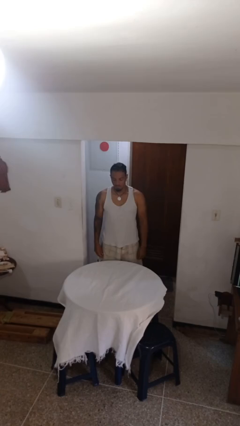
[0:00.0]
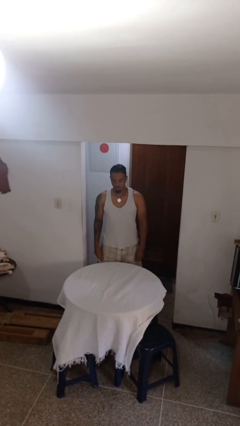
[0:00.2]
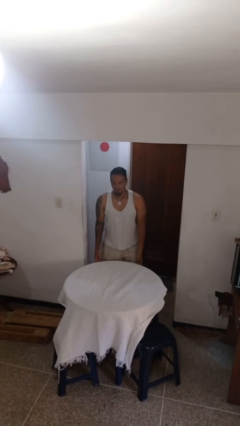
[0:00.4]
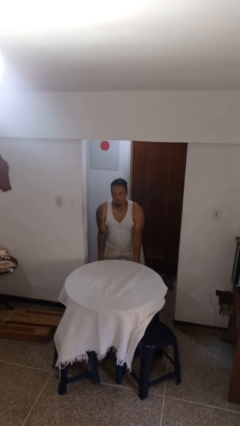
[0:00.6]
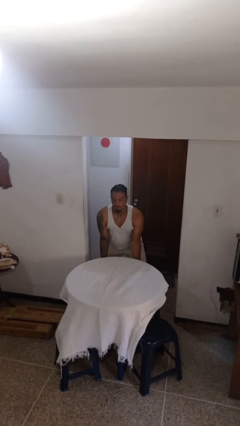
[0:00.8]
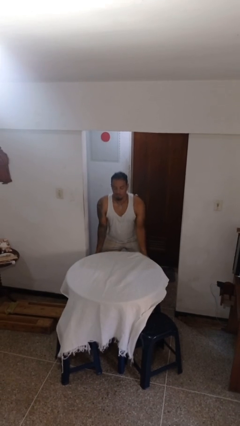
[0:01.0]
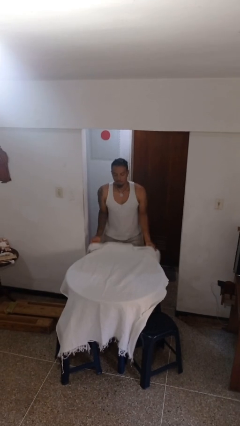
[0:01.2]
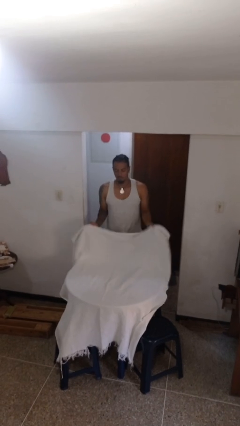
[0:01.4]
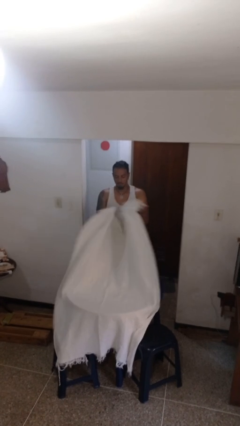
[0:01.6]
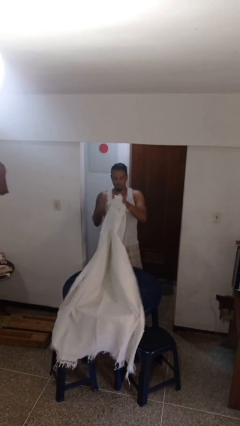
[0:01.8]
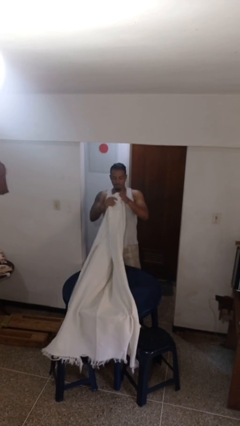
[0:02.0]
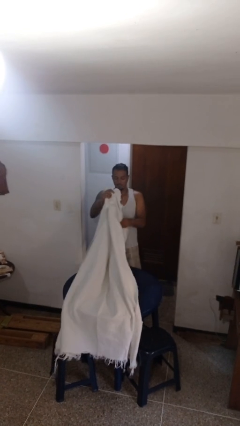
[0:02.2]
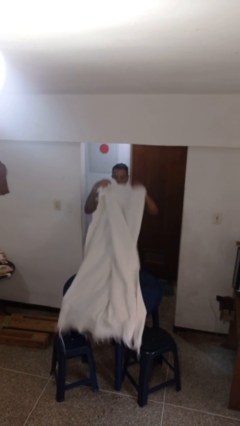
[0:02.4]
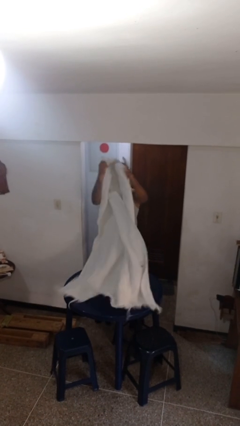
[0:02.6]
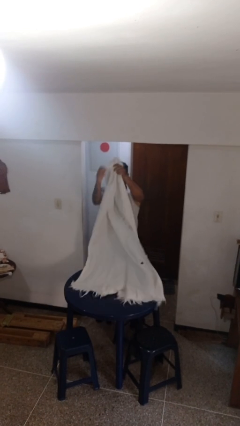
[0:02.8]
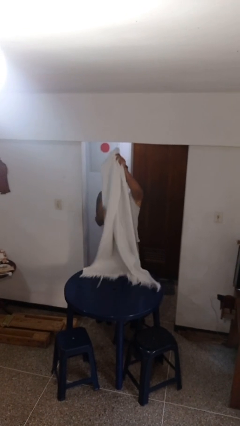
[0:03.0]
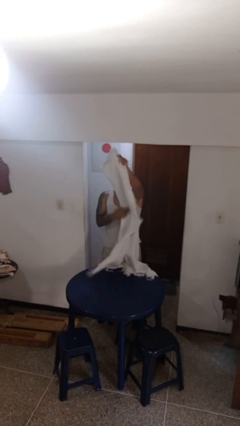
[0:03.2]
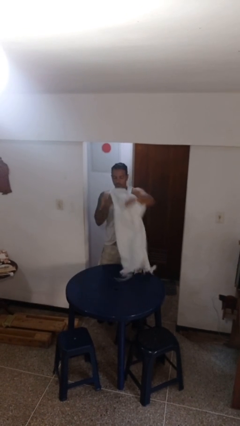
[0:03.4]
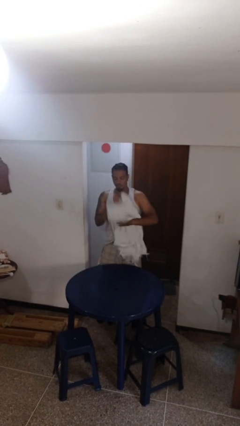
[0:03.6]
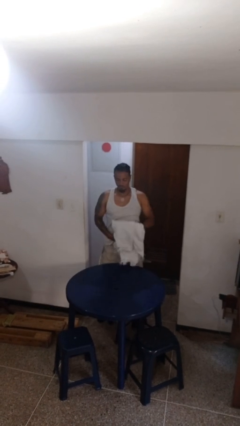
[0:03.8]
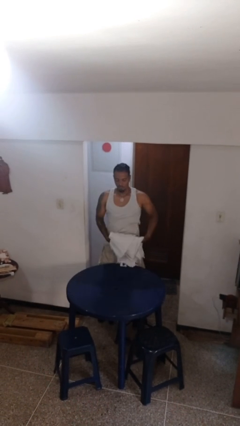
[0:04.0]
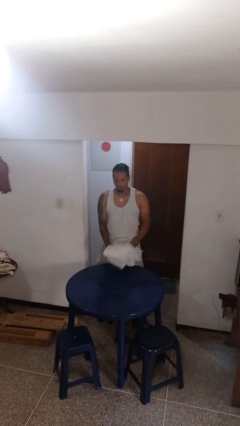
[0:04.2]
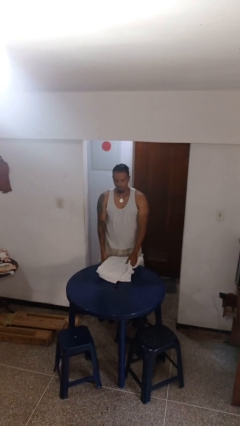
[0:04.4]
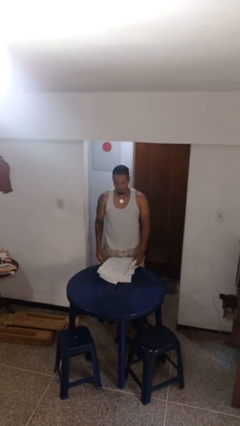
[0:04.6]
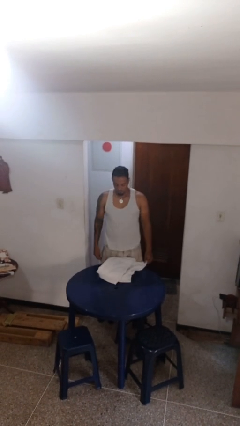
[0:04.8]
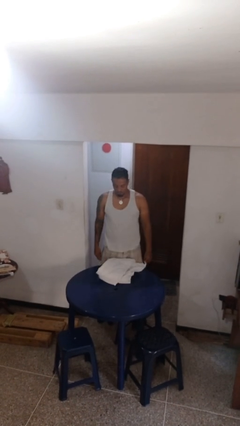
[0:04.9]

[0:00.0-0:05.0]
person folds tablecloth

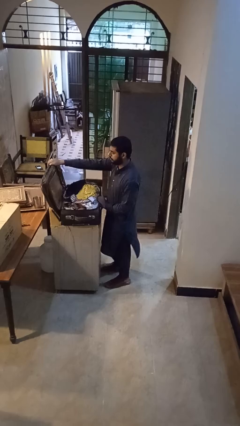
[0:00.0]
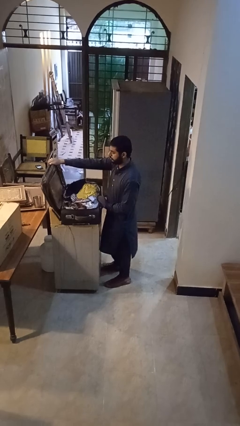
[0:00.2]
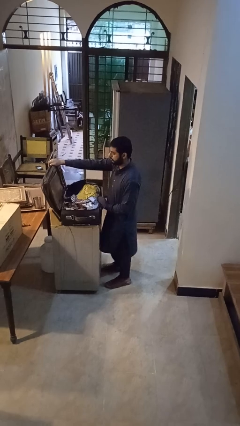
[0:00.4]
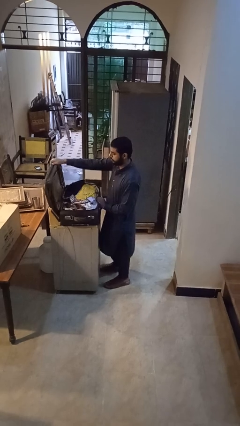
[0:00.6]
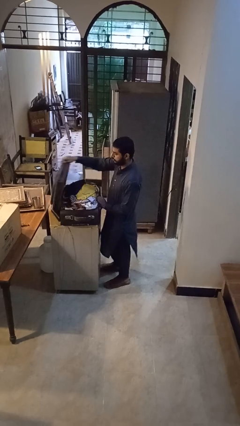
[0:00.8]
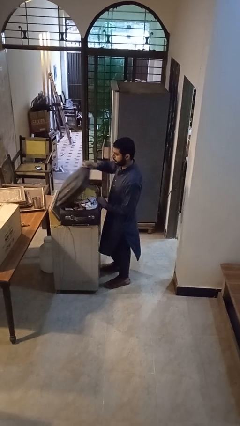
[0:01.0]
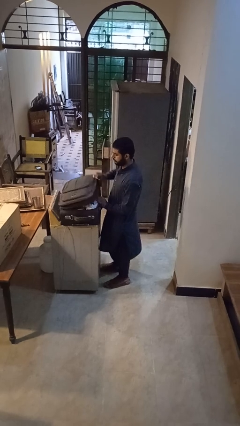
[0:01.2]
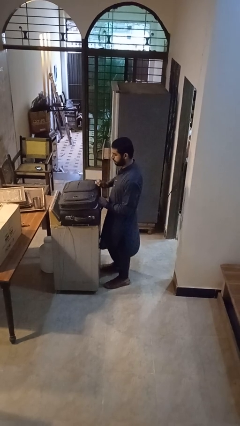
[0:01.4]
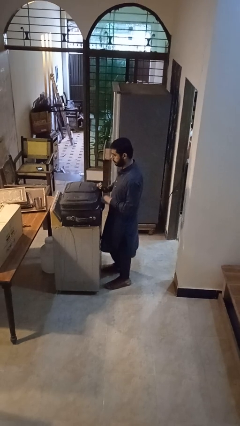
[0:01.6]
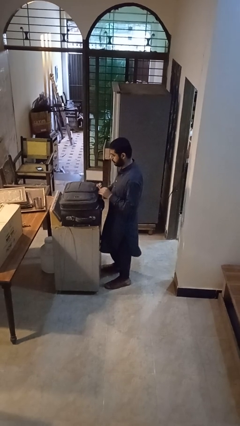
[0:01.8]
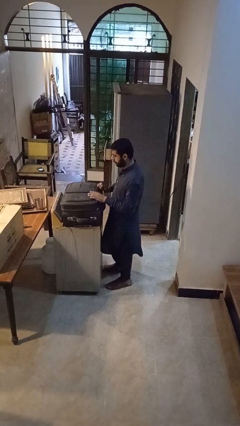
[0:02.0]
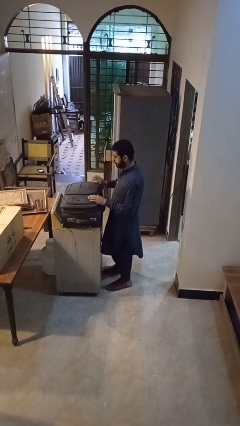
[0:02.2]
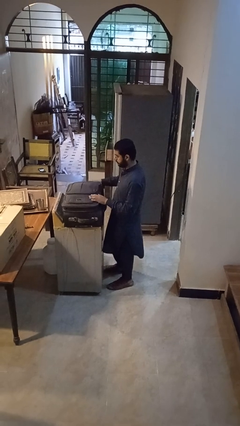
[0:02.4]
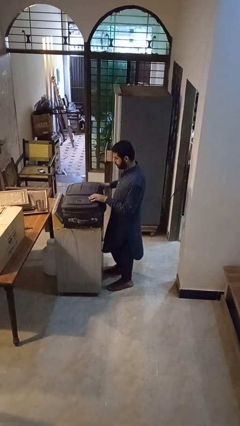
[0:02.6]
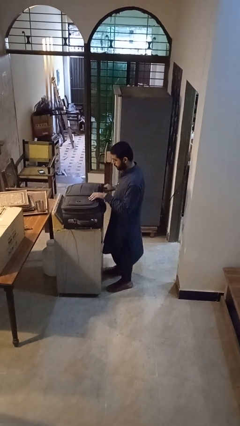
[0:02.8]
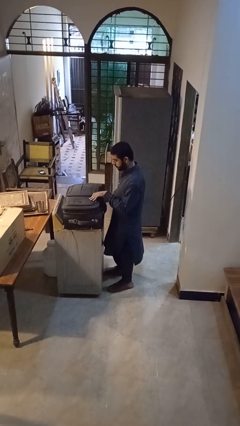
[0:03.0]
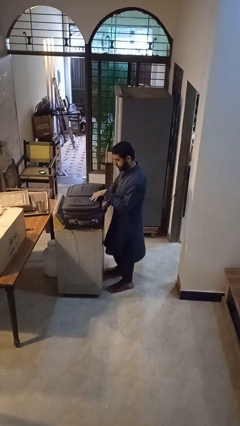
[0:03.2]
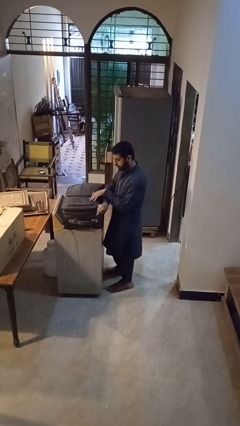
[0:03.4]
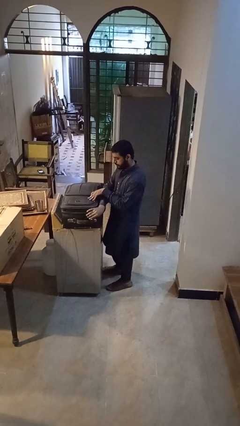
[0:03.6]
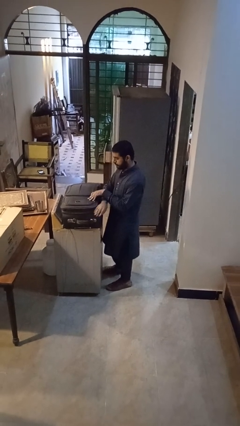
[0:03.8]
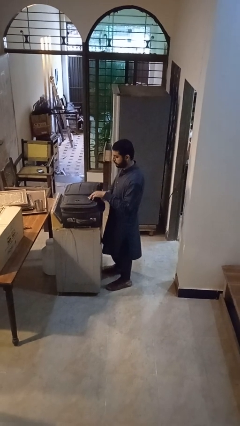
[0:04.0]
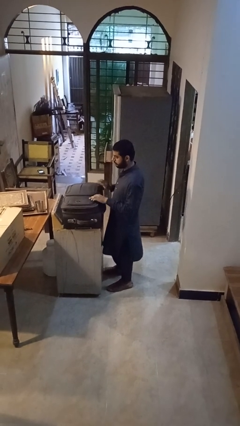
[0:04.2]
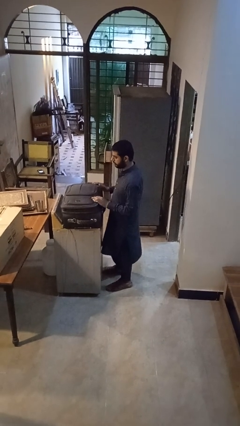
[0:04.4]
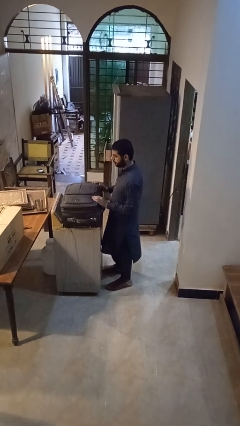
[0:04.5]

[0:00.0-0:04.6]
person closes suitcase

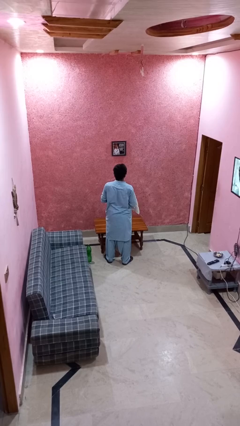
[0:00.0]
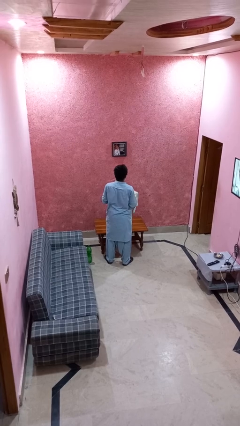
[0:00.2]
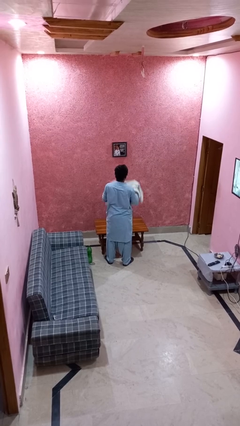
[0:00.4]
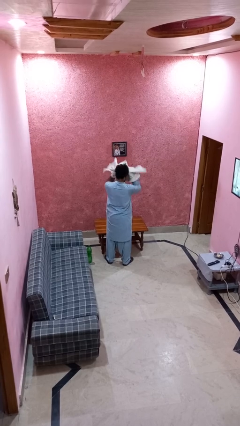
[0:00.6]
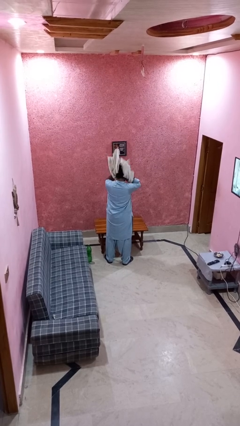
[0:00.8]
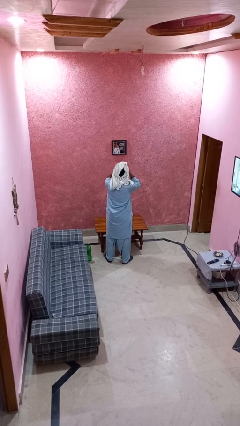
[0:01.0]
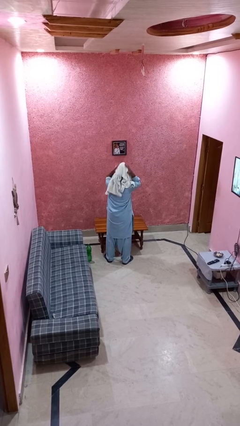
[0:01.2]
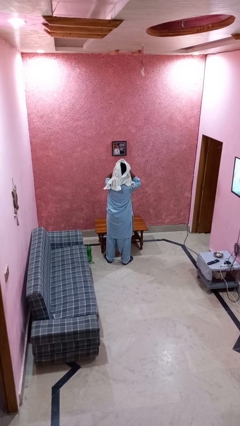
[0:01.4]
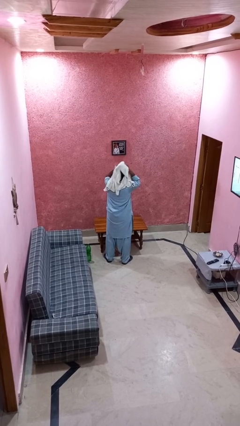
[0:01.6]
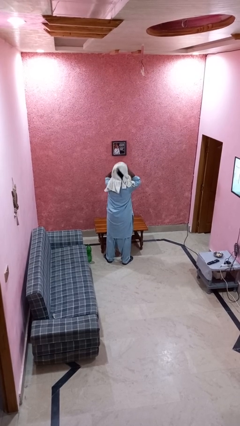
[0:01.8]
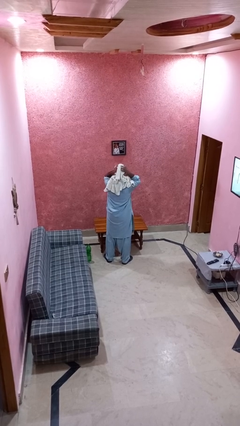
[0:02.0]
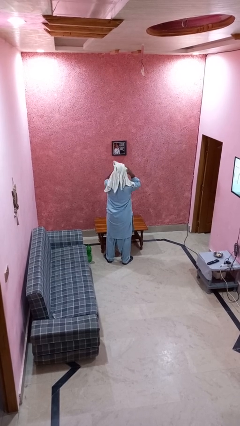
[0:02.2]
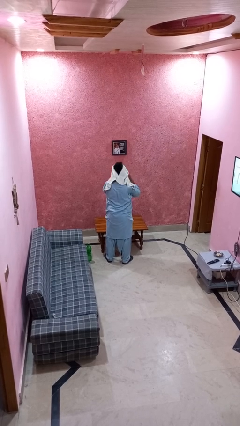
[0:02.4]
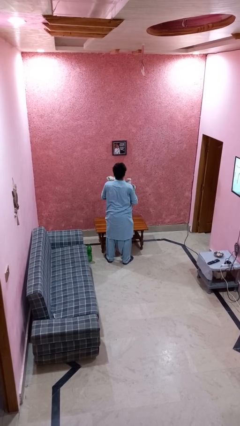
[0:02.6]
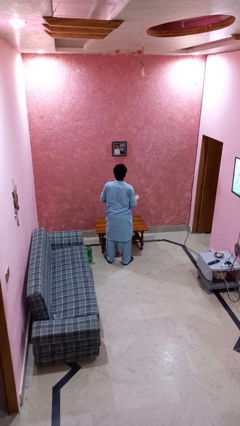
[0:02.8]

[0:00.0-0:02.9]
person dries hair with towel

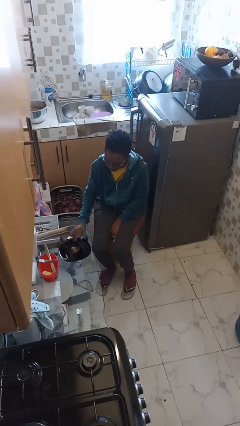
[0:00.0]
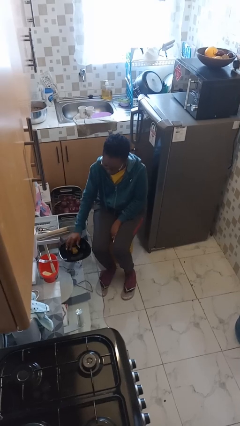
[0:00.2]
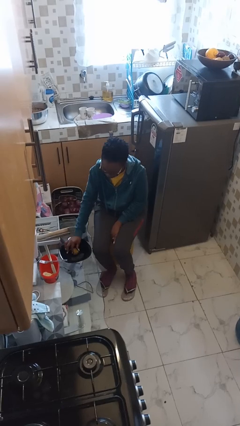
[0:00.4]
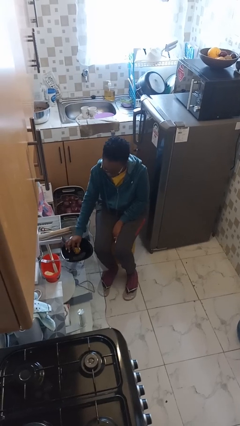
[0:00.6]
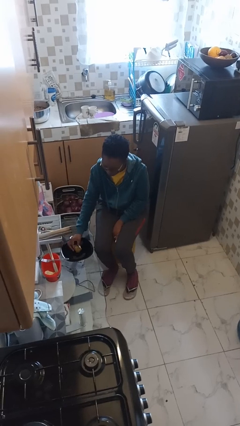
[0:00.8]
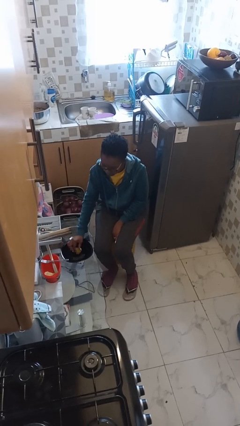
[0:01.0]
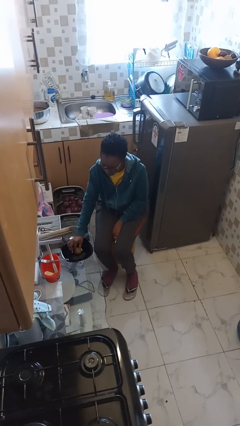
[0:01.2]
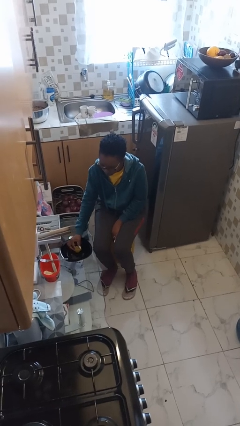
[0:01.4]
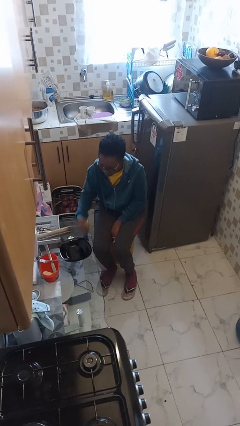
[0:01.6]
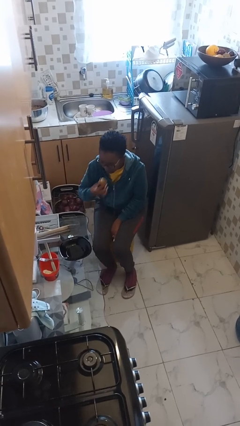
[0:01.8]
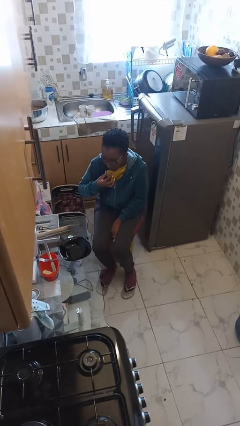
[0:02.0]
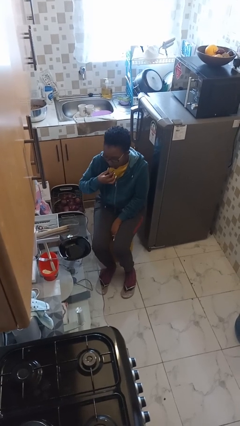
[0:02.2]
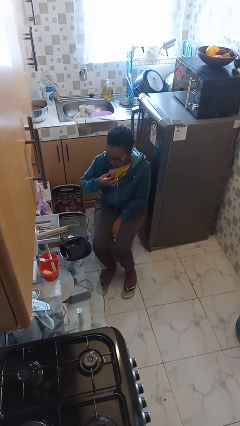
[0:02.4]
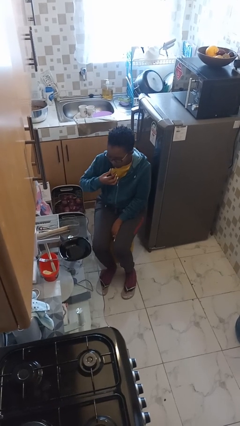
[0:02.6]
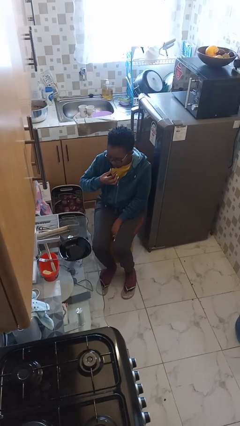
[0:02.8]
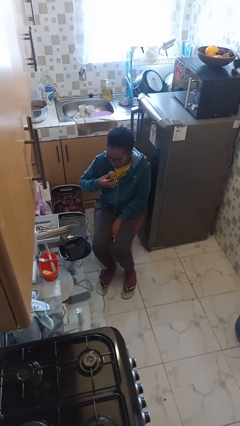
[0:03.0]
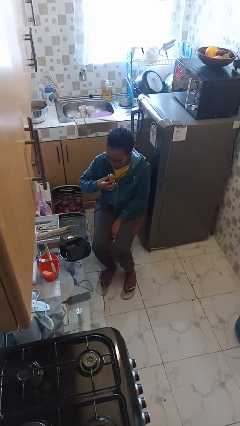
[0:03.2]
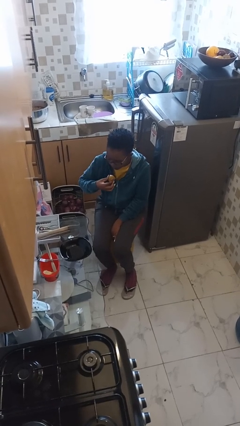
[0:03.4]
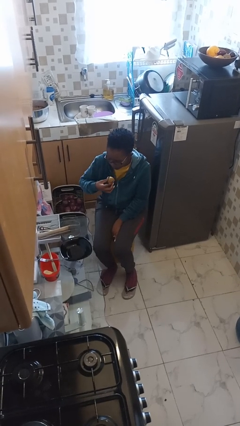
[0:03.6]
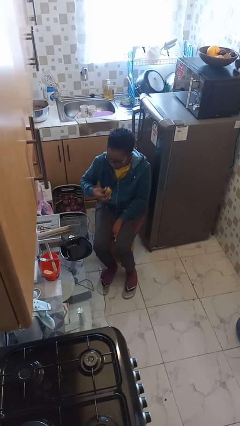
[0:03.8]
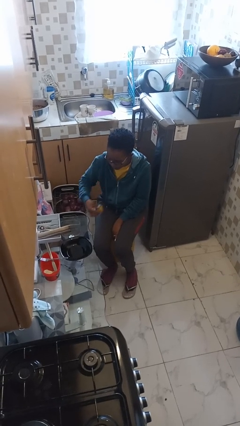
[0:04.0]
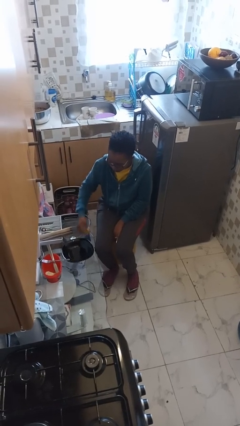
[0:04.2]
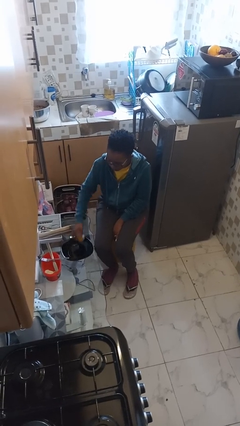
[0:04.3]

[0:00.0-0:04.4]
person eats with hands

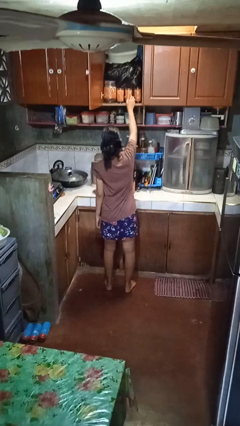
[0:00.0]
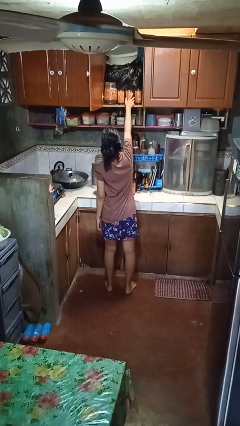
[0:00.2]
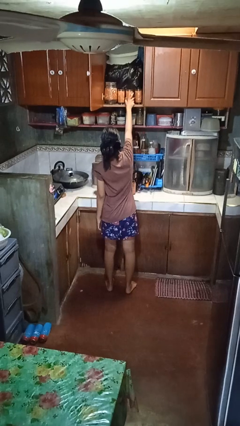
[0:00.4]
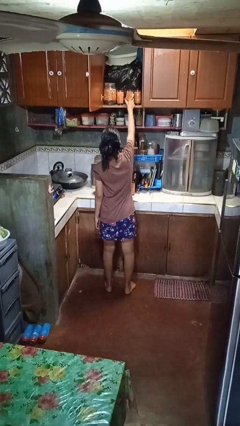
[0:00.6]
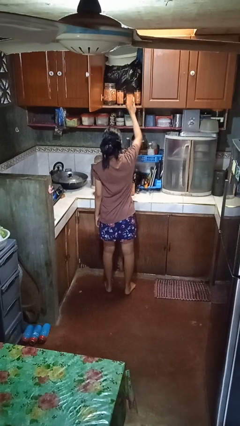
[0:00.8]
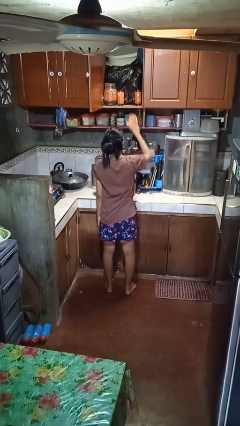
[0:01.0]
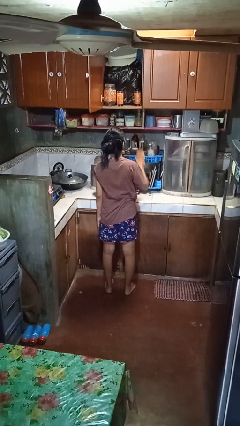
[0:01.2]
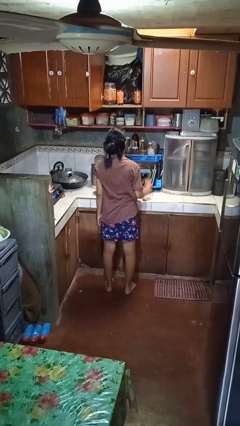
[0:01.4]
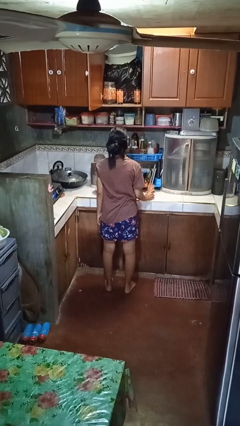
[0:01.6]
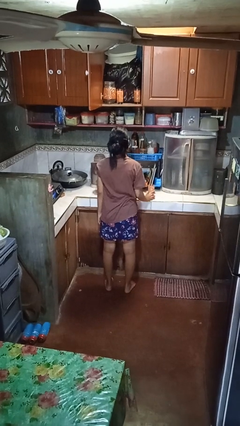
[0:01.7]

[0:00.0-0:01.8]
person takes object from cabinet
